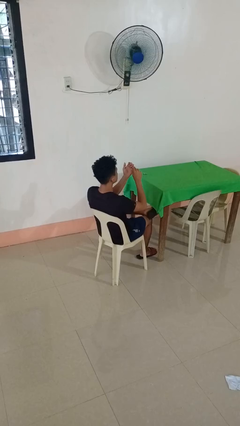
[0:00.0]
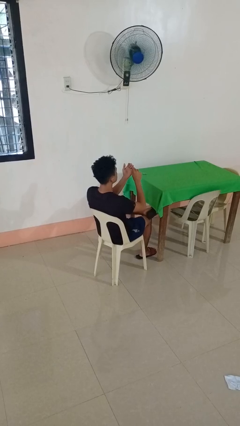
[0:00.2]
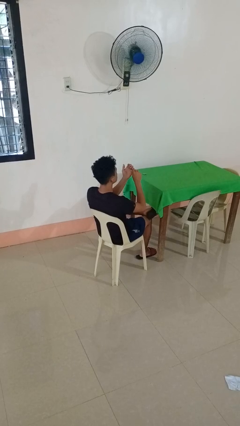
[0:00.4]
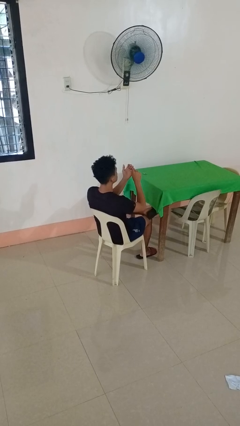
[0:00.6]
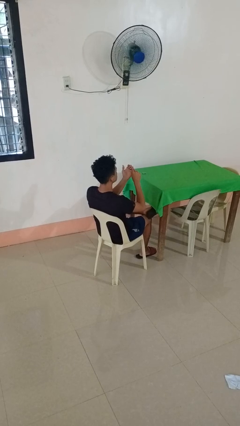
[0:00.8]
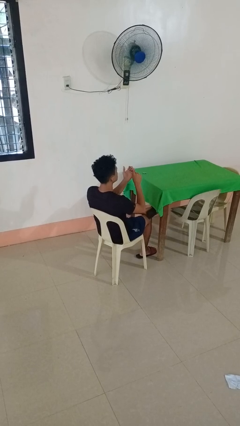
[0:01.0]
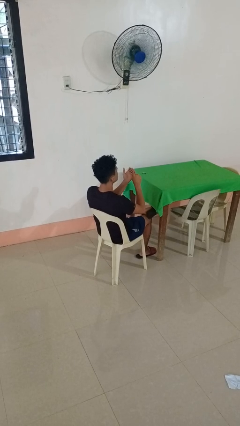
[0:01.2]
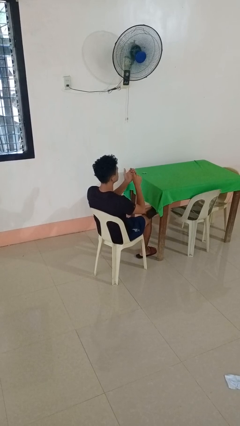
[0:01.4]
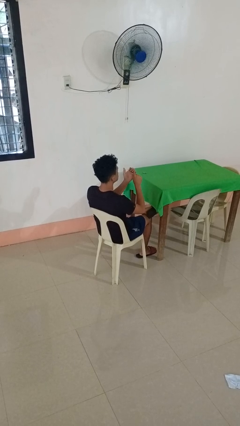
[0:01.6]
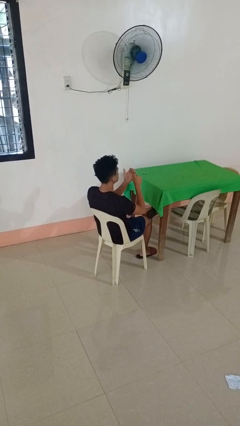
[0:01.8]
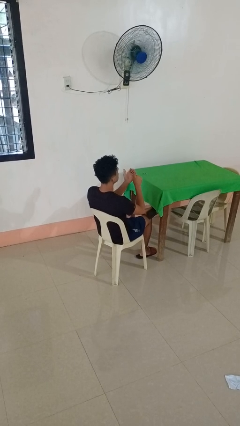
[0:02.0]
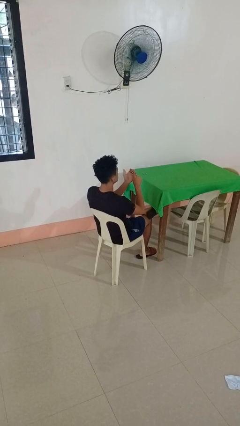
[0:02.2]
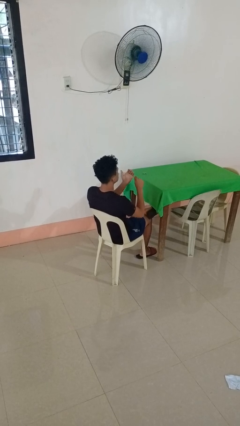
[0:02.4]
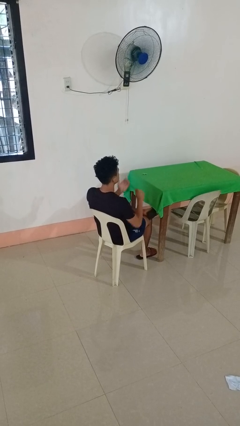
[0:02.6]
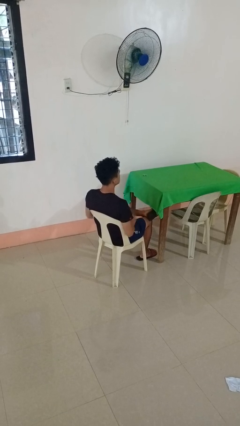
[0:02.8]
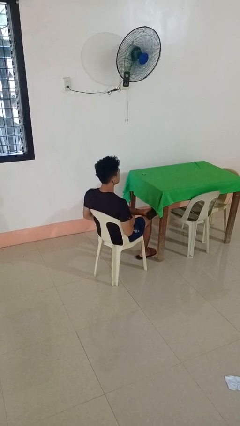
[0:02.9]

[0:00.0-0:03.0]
person files fingernails

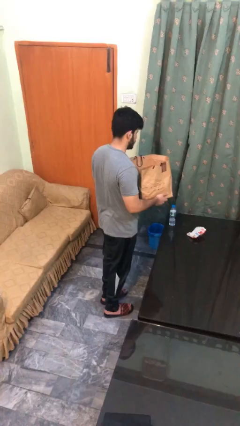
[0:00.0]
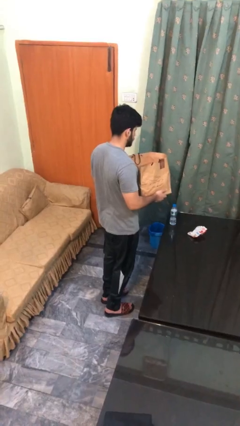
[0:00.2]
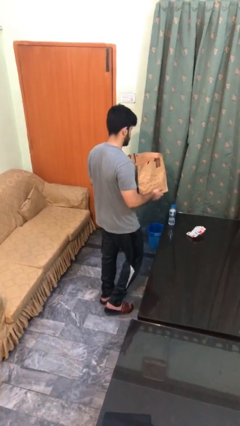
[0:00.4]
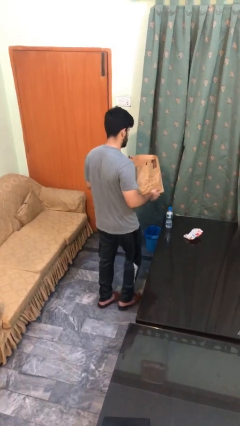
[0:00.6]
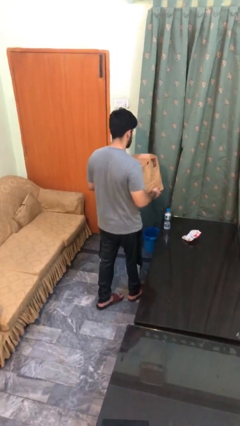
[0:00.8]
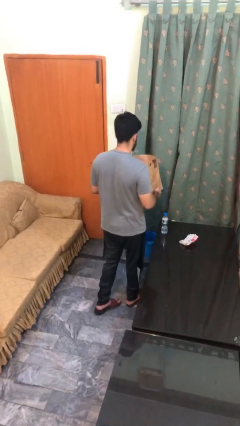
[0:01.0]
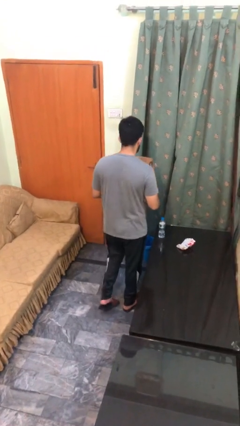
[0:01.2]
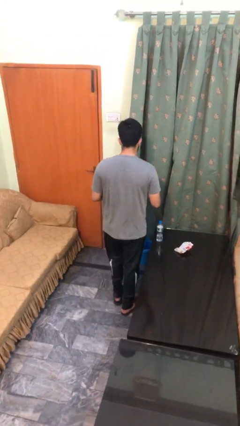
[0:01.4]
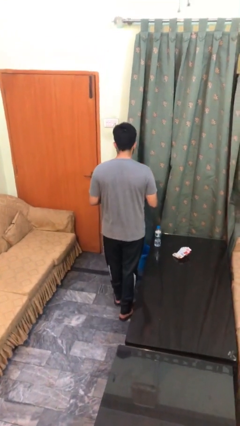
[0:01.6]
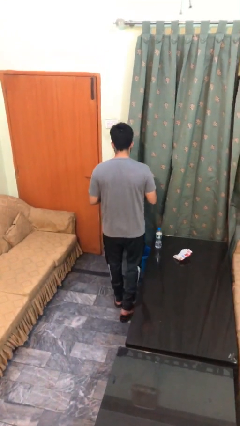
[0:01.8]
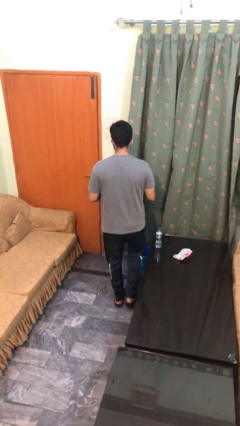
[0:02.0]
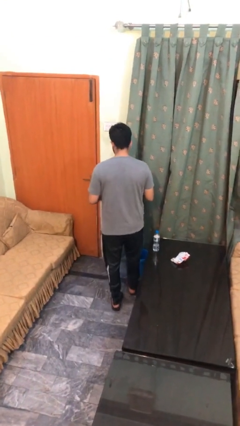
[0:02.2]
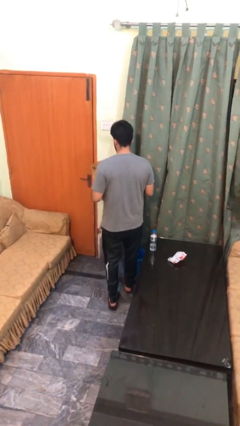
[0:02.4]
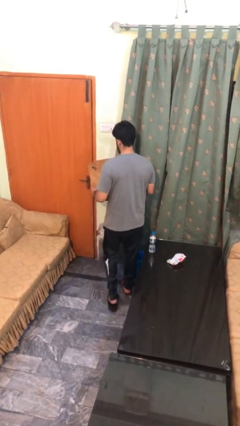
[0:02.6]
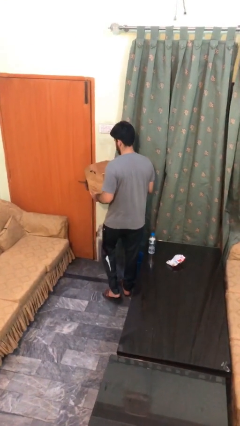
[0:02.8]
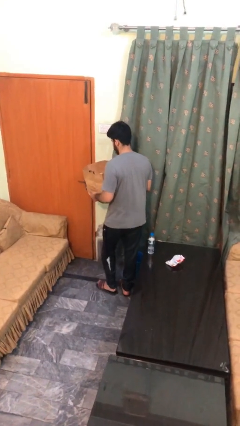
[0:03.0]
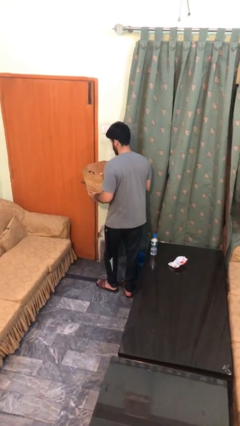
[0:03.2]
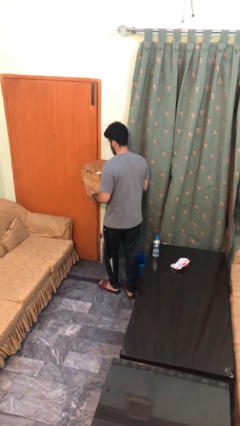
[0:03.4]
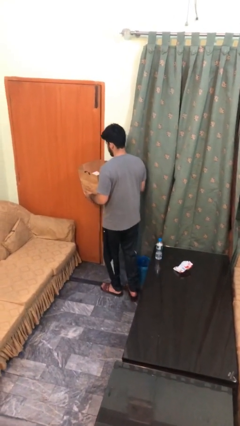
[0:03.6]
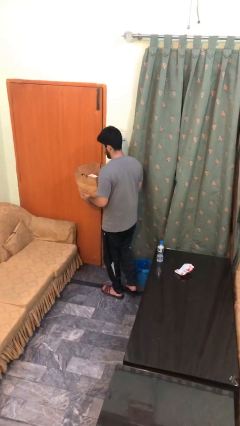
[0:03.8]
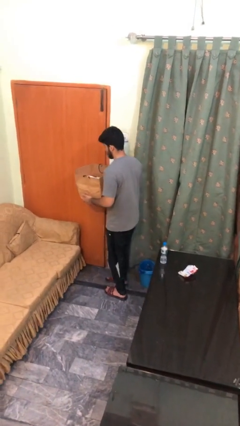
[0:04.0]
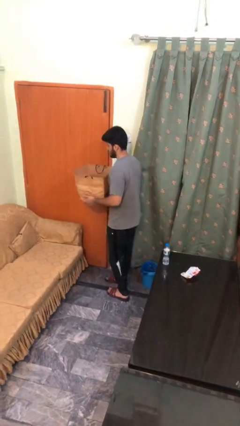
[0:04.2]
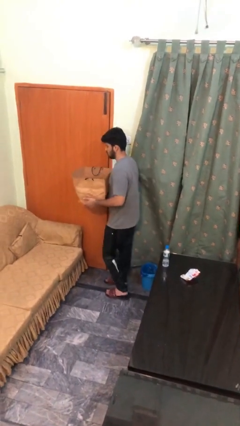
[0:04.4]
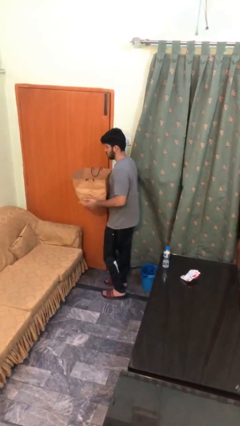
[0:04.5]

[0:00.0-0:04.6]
person carries groceries

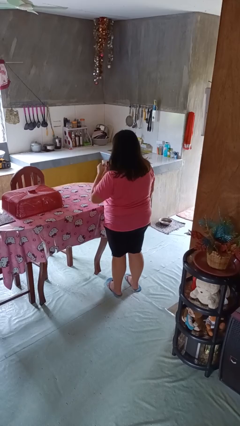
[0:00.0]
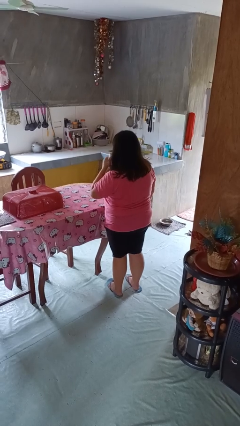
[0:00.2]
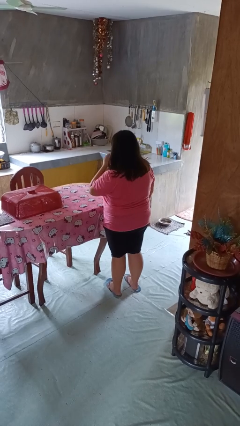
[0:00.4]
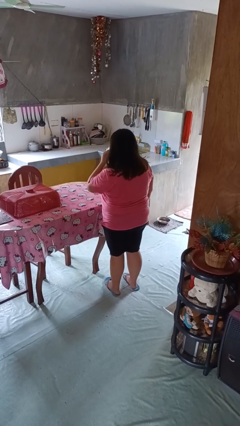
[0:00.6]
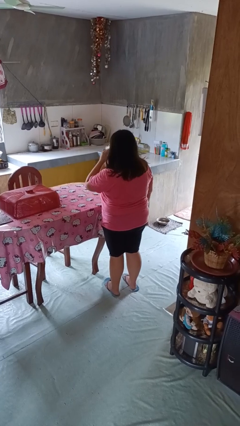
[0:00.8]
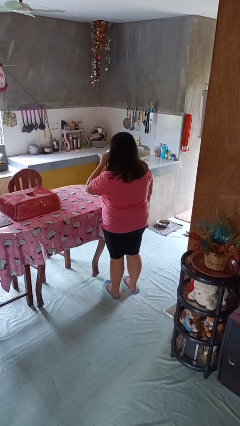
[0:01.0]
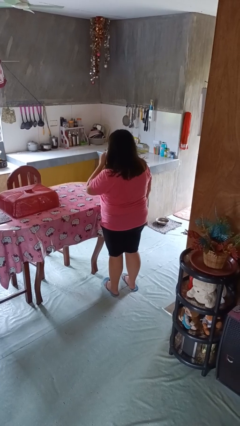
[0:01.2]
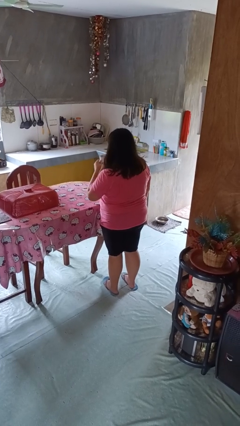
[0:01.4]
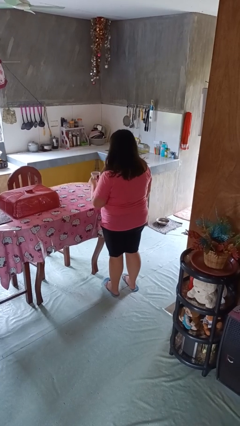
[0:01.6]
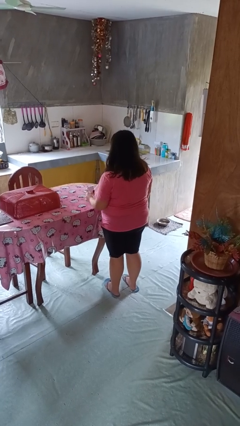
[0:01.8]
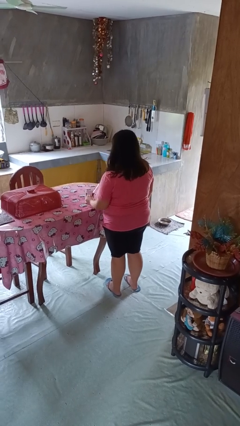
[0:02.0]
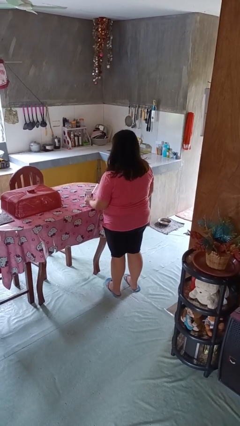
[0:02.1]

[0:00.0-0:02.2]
person drinks from mug

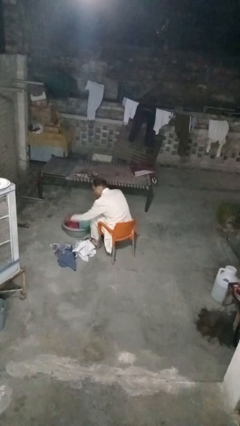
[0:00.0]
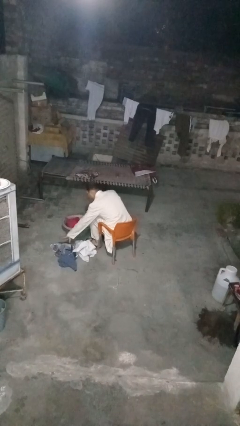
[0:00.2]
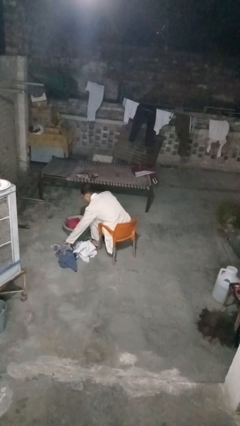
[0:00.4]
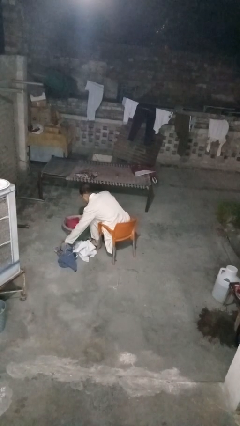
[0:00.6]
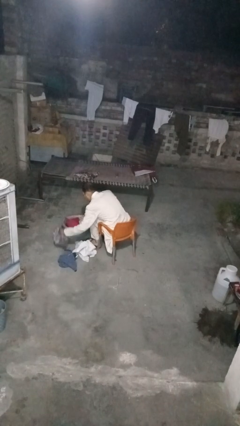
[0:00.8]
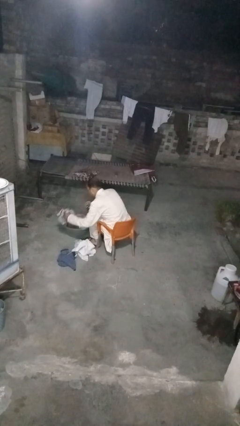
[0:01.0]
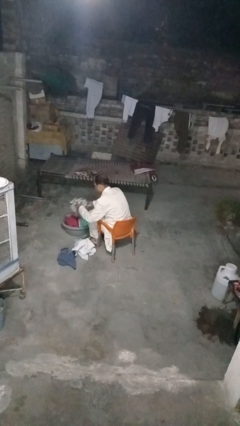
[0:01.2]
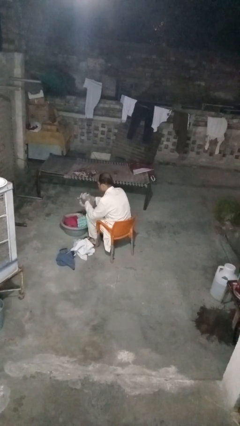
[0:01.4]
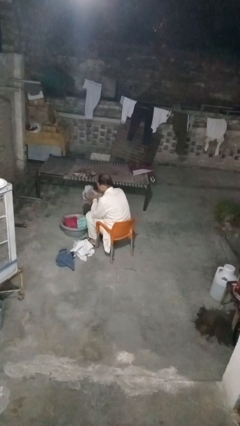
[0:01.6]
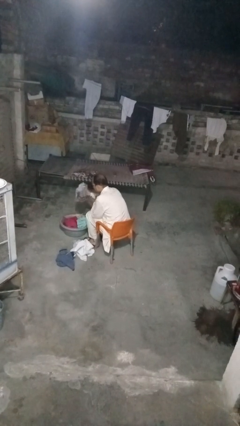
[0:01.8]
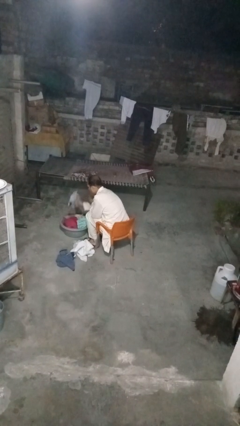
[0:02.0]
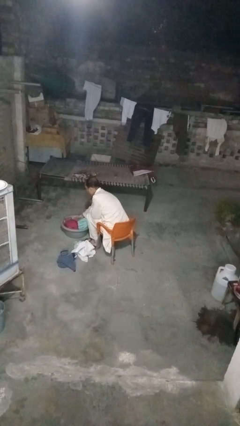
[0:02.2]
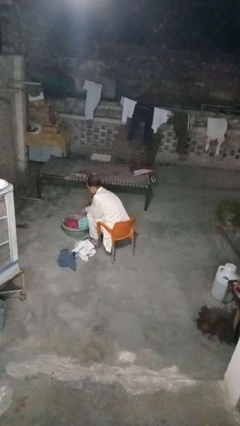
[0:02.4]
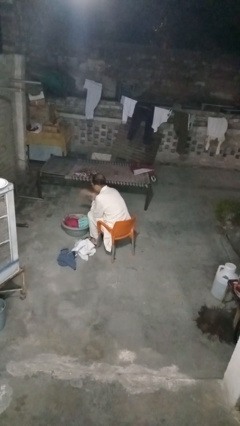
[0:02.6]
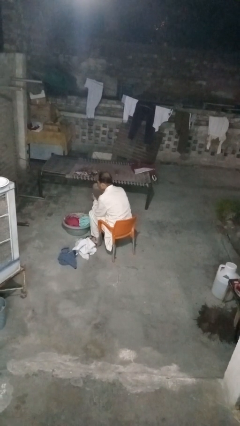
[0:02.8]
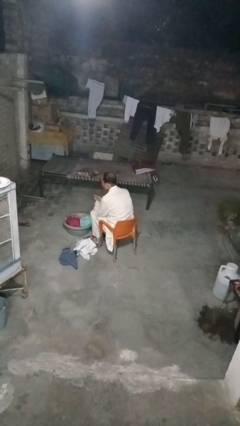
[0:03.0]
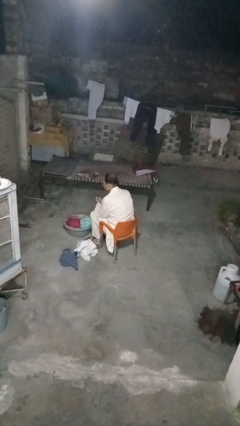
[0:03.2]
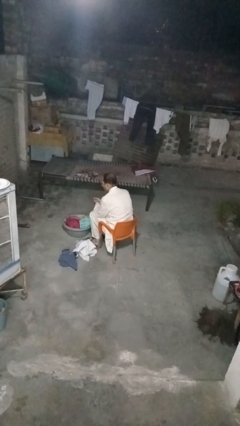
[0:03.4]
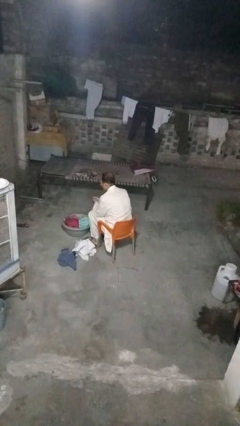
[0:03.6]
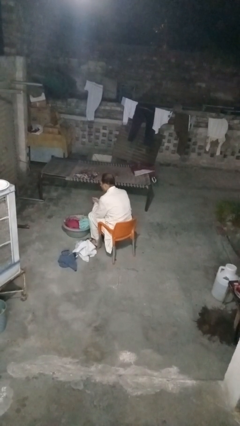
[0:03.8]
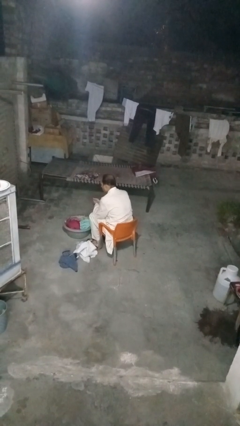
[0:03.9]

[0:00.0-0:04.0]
person puts object into basket

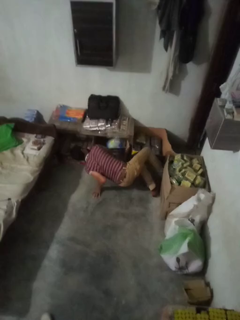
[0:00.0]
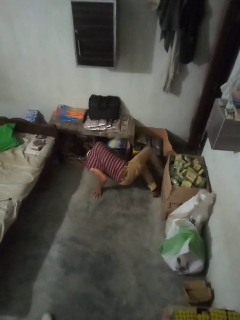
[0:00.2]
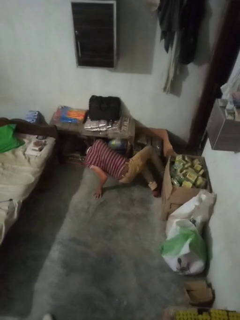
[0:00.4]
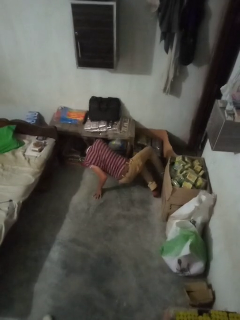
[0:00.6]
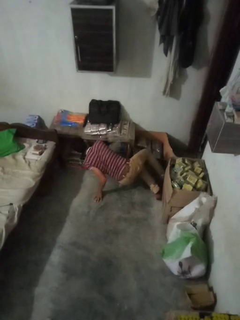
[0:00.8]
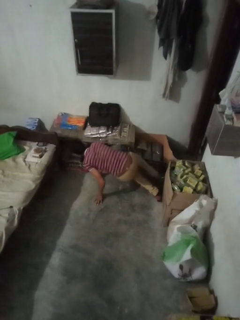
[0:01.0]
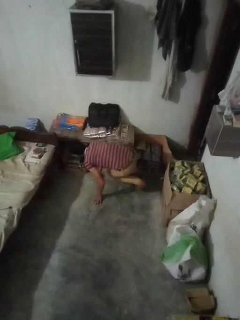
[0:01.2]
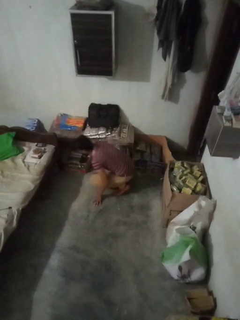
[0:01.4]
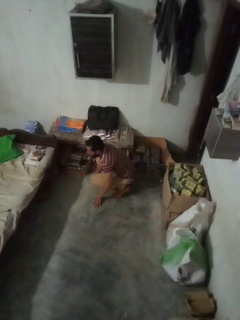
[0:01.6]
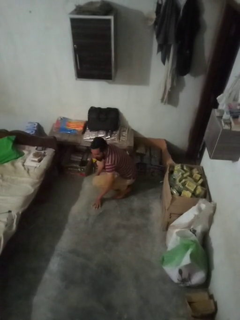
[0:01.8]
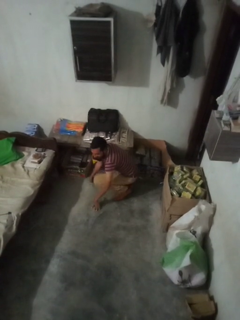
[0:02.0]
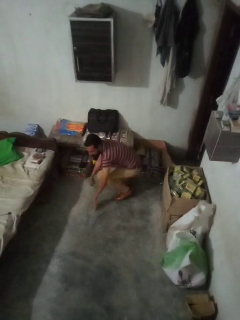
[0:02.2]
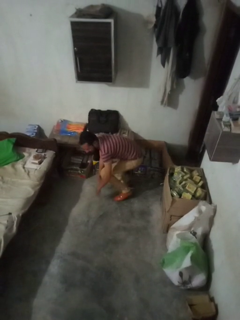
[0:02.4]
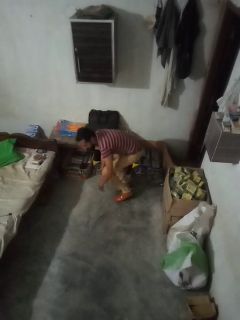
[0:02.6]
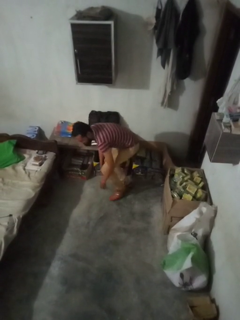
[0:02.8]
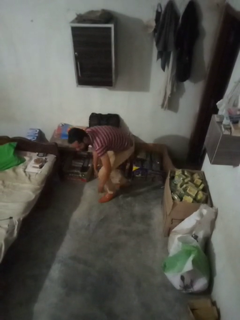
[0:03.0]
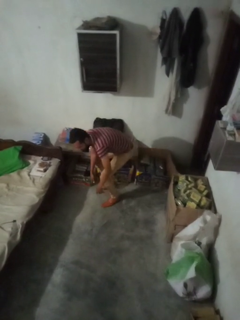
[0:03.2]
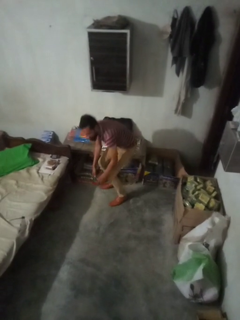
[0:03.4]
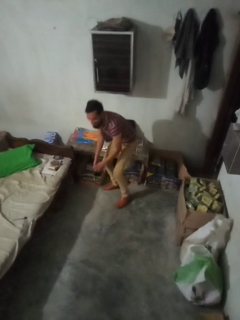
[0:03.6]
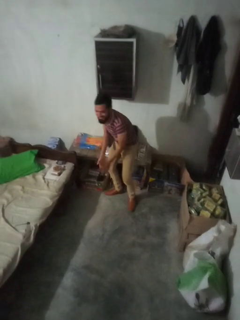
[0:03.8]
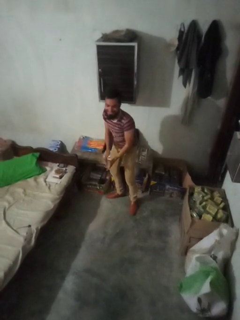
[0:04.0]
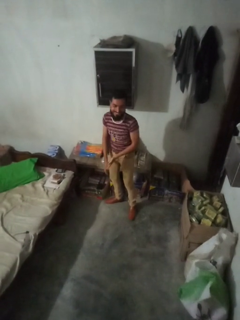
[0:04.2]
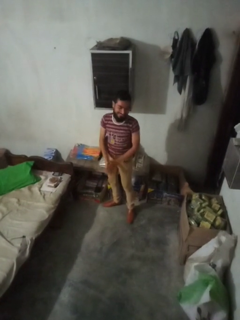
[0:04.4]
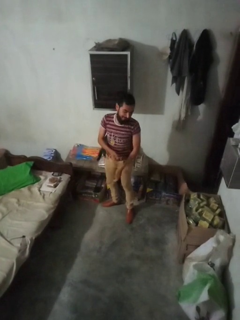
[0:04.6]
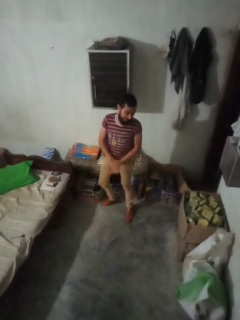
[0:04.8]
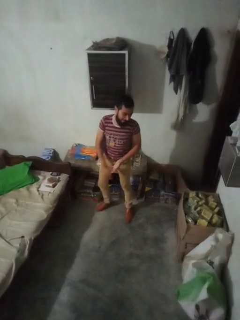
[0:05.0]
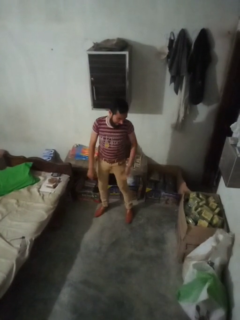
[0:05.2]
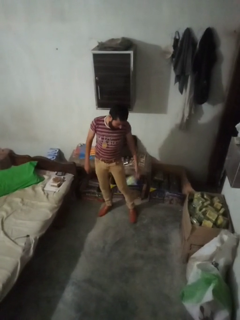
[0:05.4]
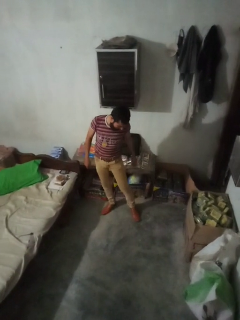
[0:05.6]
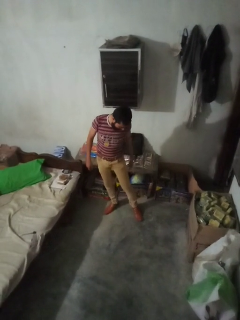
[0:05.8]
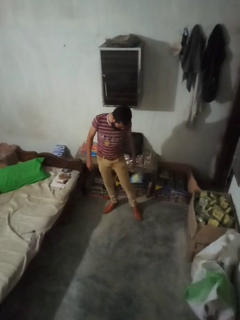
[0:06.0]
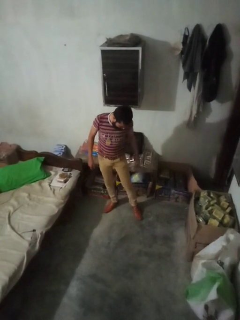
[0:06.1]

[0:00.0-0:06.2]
person stands up from floor
